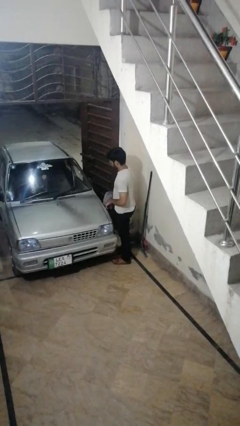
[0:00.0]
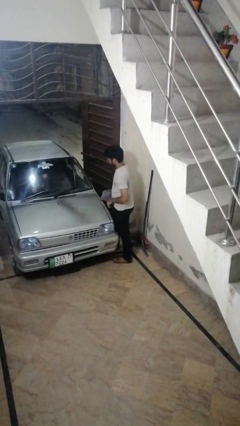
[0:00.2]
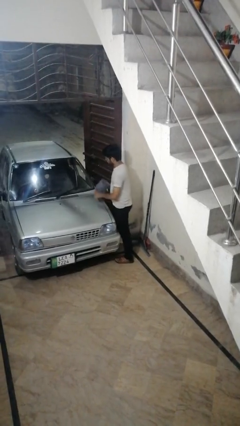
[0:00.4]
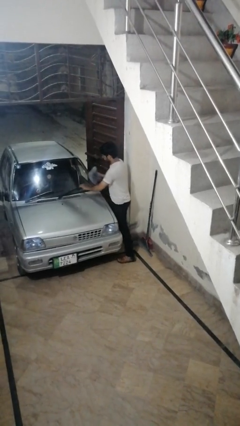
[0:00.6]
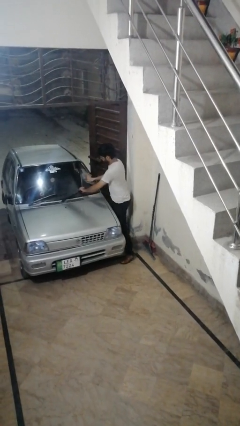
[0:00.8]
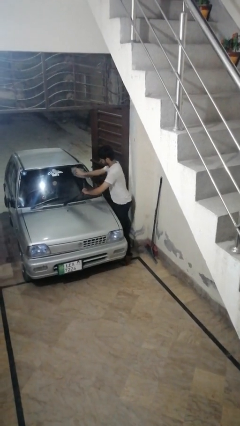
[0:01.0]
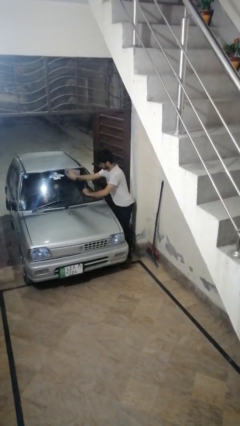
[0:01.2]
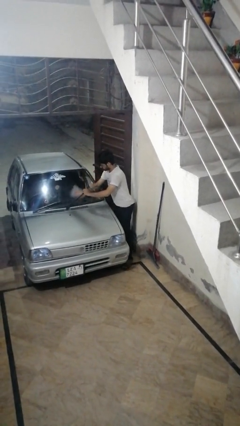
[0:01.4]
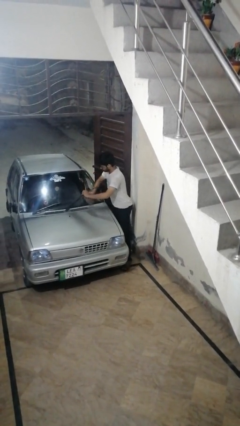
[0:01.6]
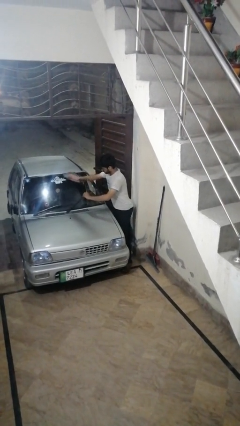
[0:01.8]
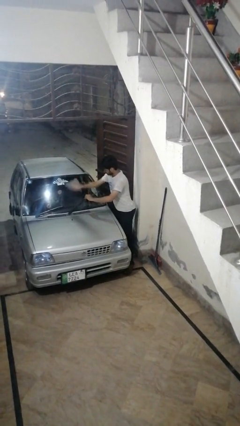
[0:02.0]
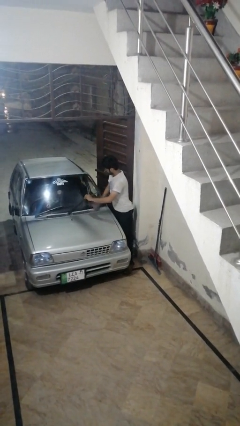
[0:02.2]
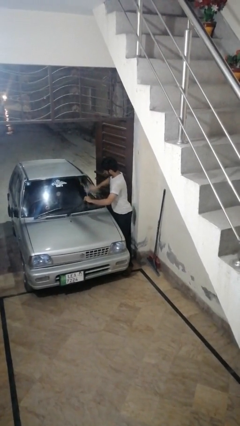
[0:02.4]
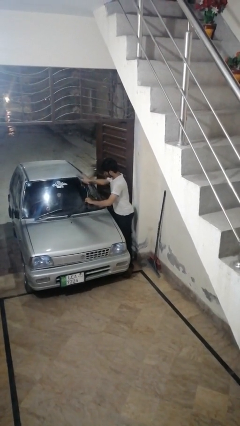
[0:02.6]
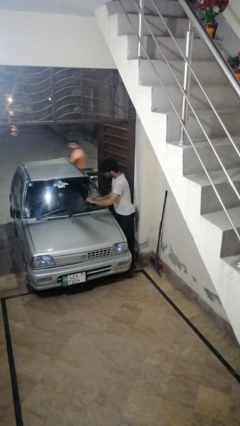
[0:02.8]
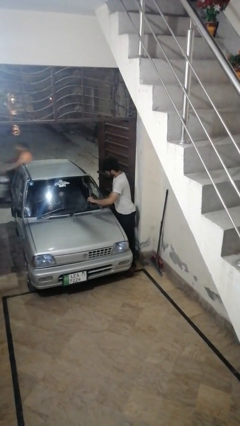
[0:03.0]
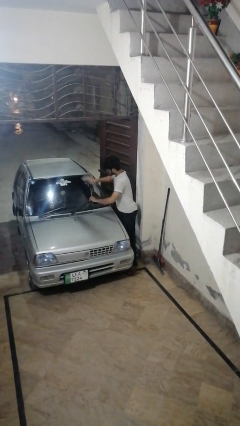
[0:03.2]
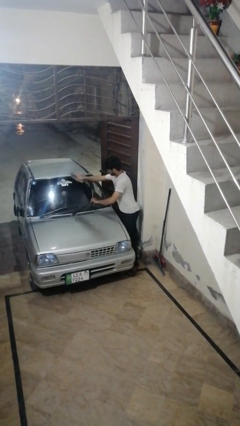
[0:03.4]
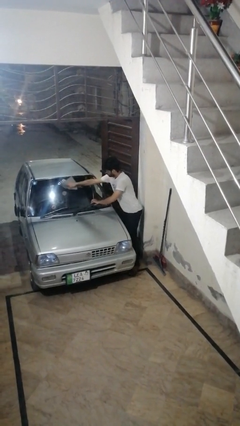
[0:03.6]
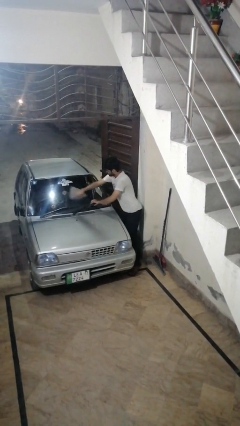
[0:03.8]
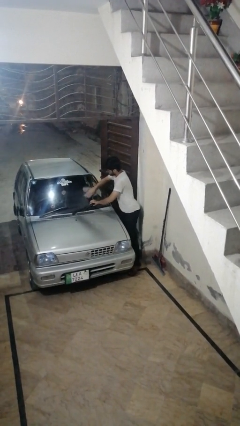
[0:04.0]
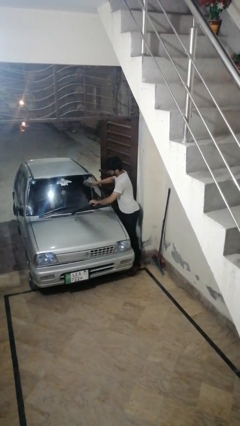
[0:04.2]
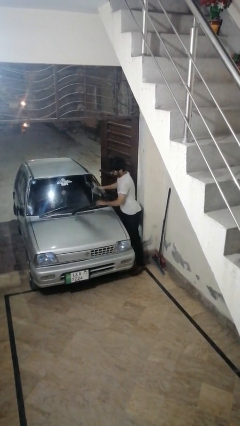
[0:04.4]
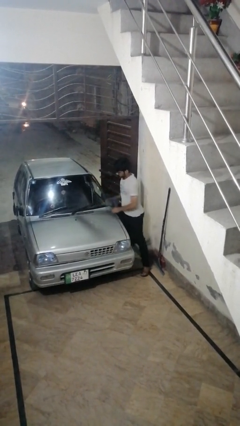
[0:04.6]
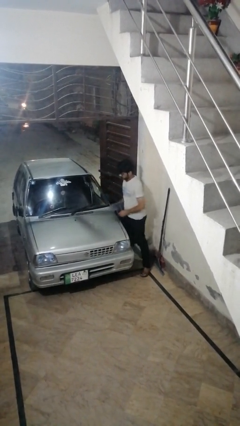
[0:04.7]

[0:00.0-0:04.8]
person polishes car with rag

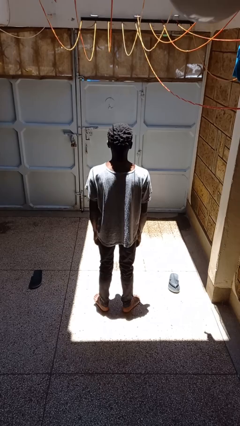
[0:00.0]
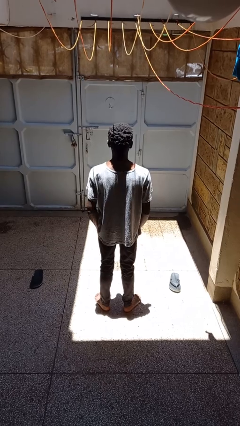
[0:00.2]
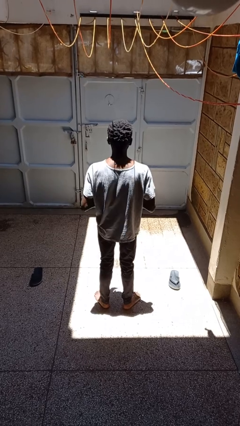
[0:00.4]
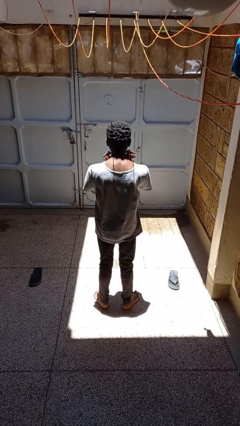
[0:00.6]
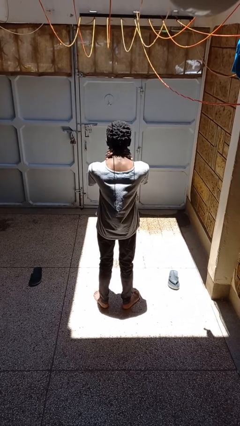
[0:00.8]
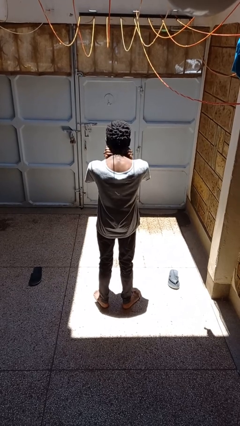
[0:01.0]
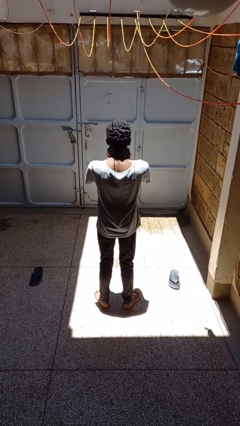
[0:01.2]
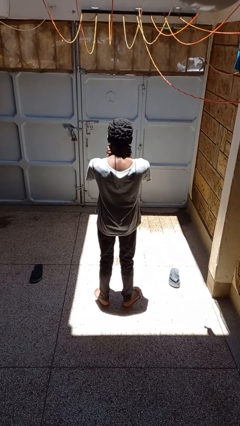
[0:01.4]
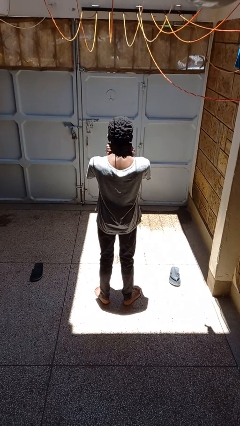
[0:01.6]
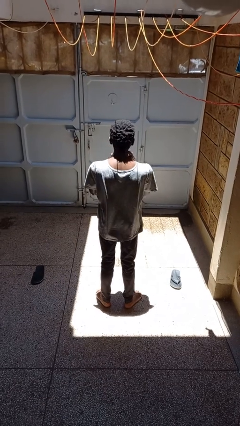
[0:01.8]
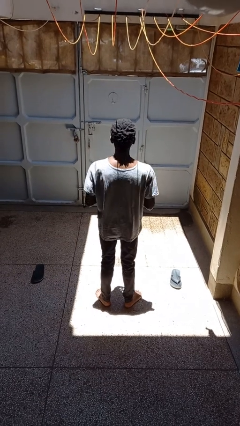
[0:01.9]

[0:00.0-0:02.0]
person rubs neck

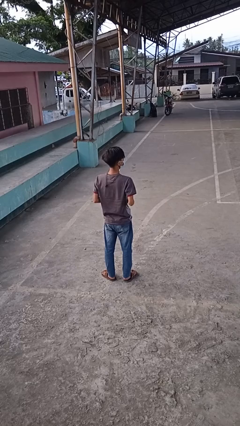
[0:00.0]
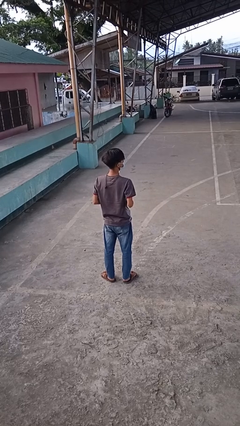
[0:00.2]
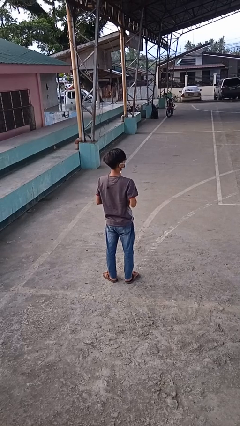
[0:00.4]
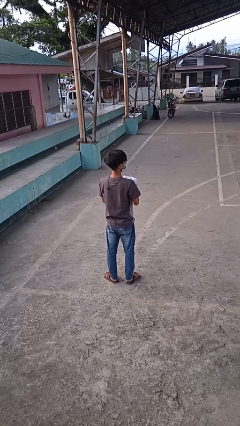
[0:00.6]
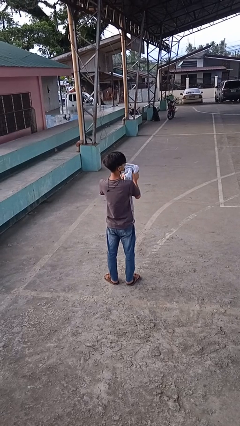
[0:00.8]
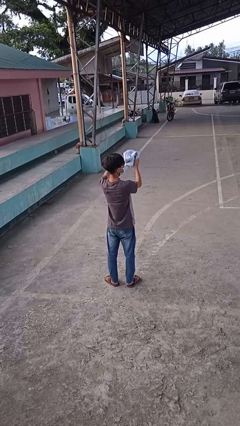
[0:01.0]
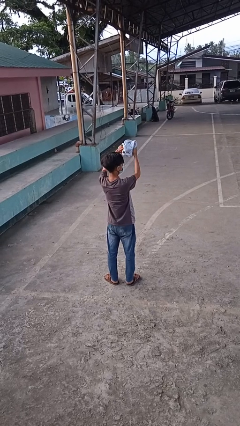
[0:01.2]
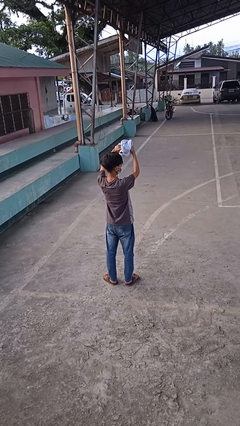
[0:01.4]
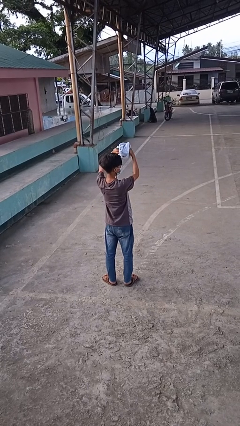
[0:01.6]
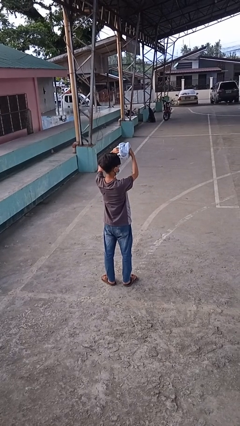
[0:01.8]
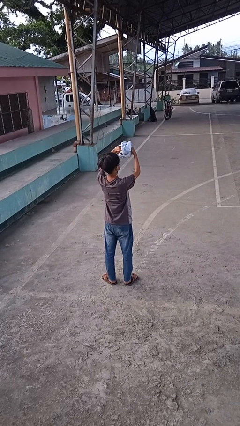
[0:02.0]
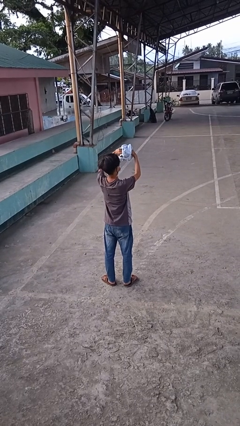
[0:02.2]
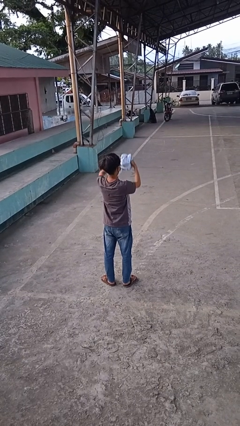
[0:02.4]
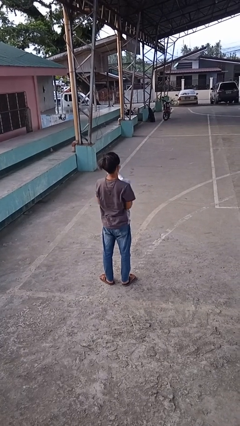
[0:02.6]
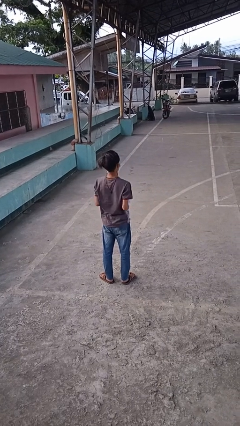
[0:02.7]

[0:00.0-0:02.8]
person squeezes object

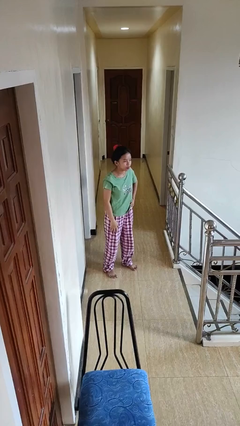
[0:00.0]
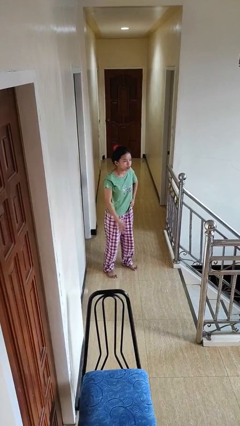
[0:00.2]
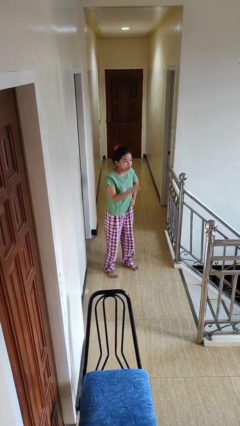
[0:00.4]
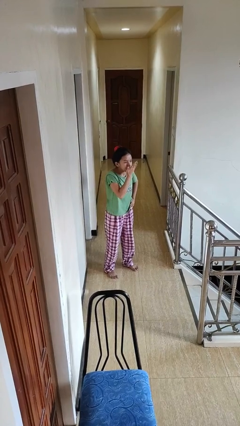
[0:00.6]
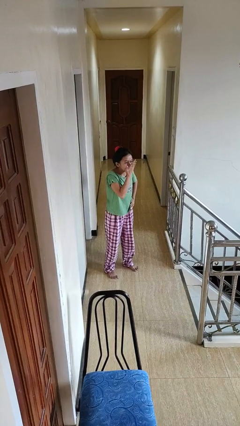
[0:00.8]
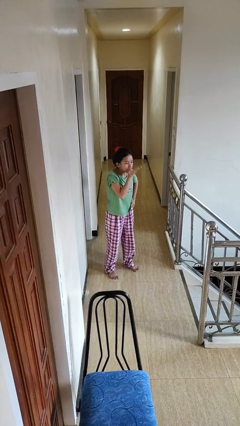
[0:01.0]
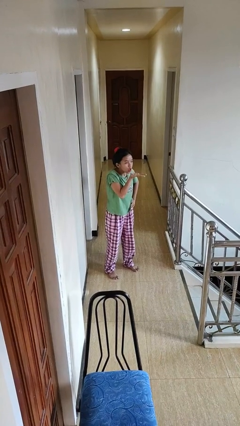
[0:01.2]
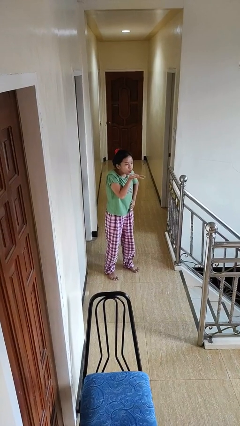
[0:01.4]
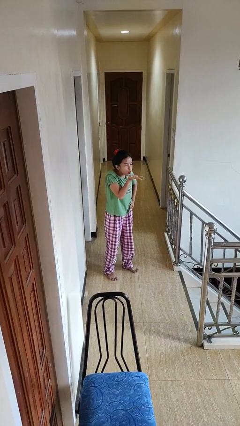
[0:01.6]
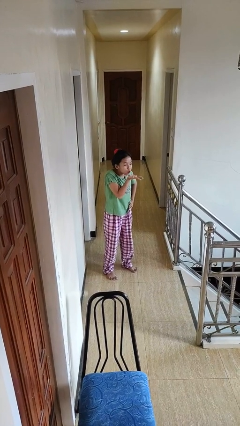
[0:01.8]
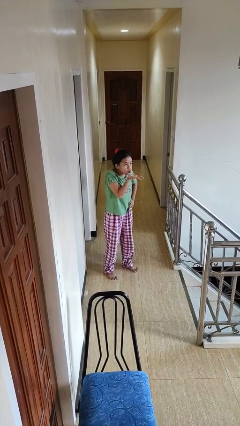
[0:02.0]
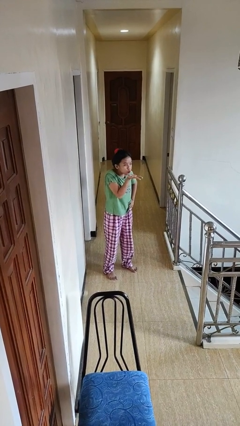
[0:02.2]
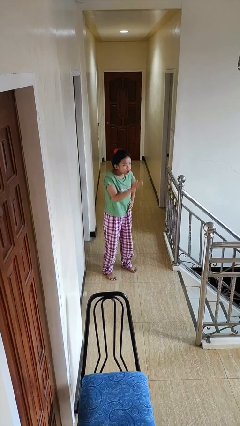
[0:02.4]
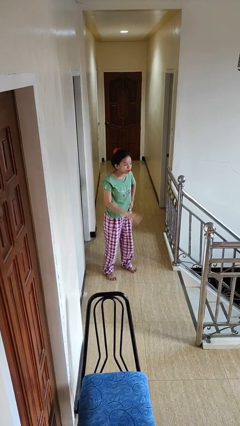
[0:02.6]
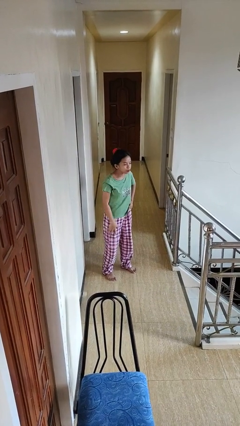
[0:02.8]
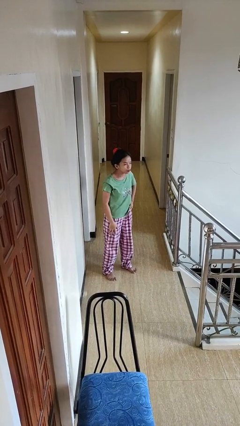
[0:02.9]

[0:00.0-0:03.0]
person gestures blow kiss

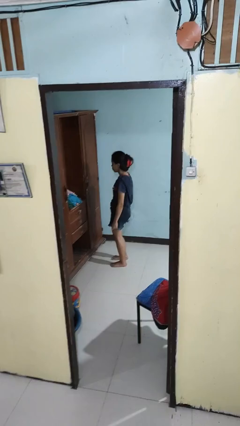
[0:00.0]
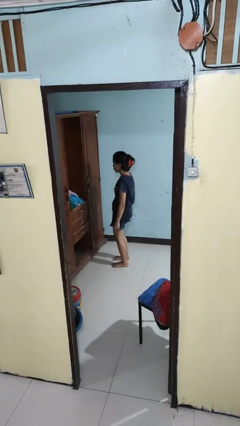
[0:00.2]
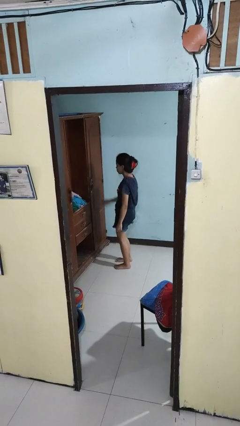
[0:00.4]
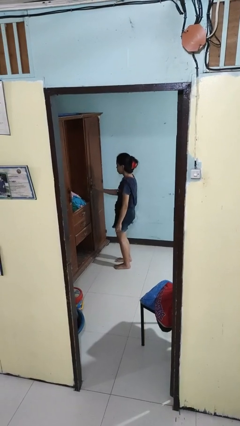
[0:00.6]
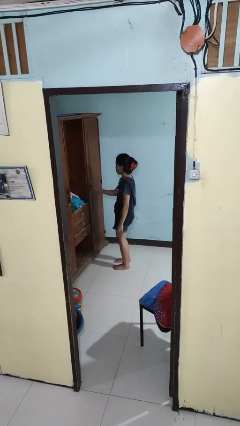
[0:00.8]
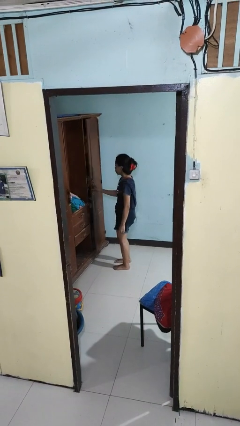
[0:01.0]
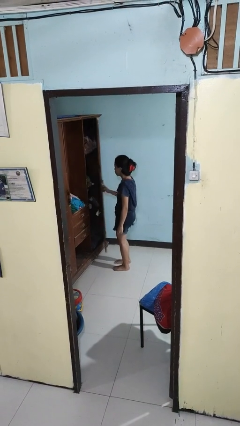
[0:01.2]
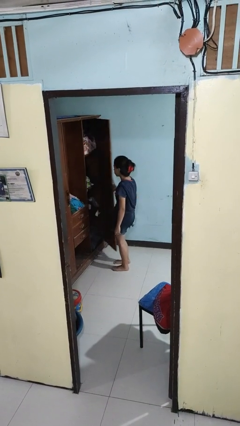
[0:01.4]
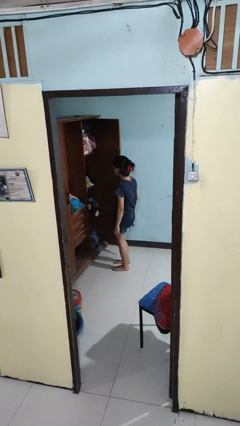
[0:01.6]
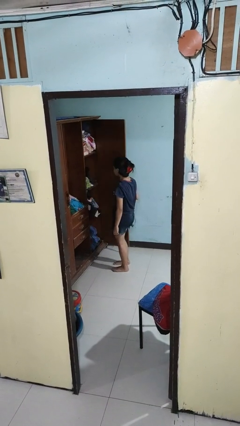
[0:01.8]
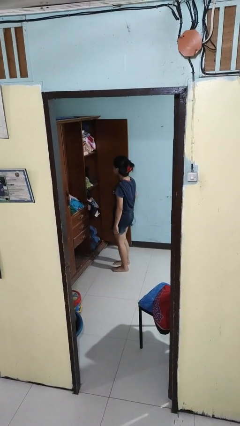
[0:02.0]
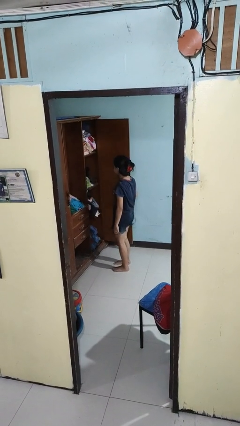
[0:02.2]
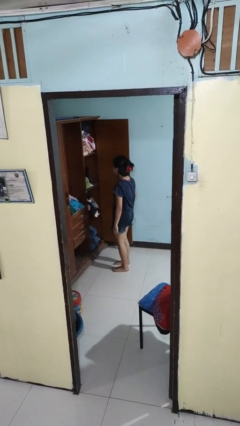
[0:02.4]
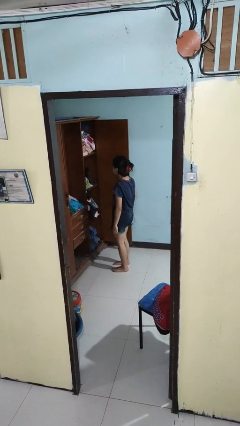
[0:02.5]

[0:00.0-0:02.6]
person opens closet door

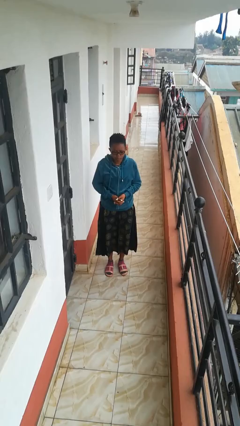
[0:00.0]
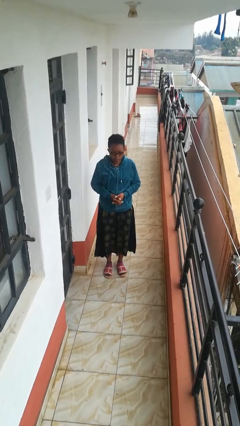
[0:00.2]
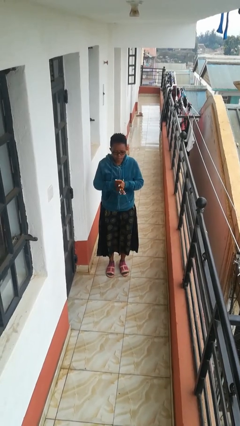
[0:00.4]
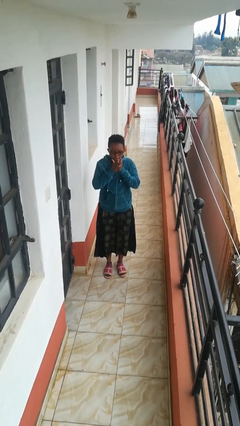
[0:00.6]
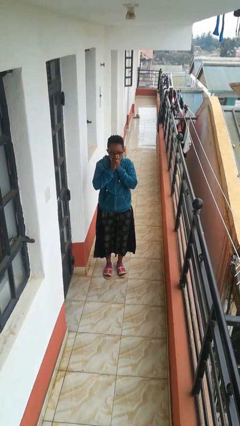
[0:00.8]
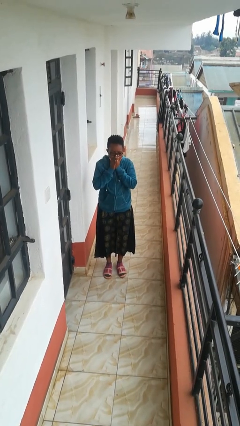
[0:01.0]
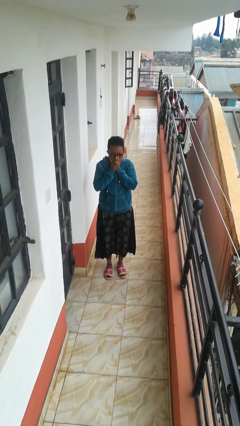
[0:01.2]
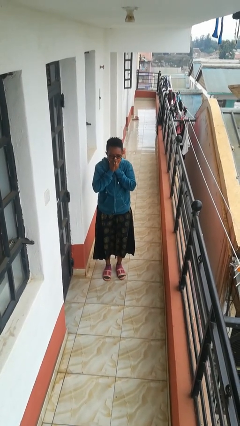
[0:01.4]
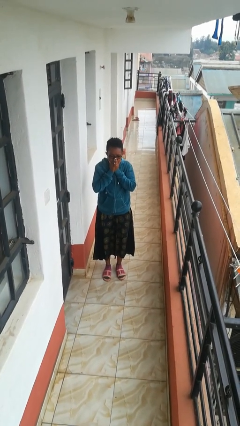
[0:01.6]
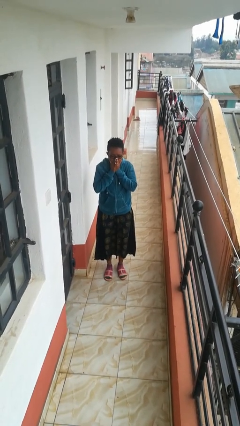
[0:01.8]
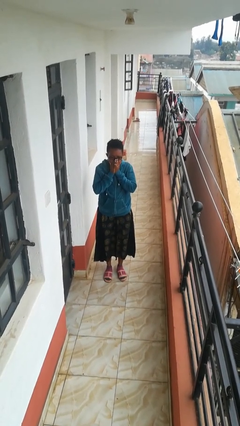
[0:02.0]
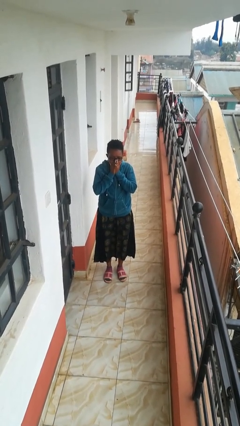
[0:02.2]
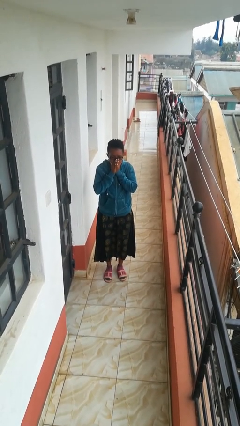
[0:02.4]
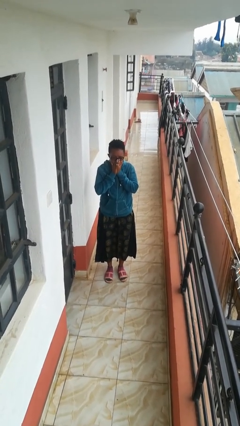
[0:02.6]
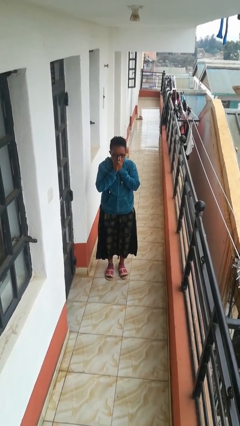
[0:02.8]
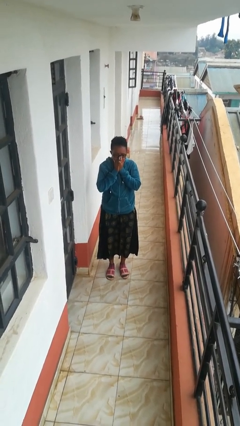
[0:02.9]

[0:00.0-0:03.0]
person blows into hands
